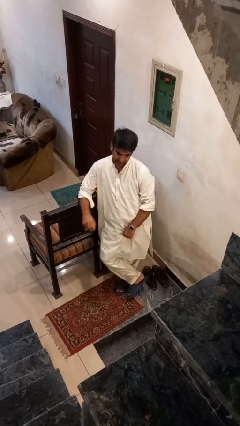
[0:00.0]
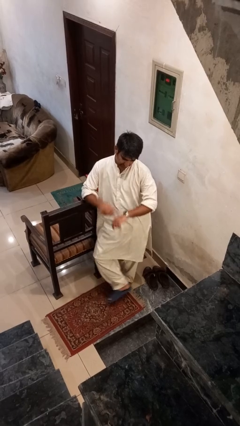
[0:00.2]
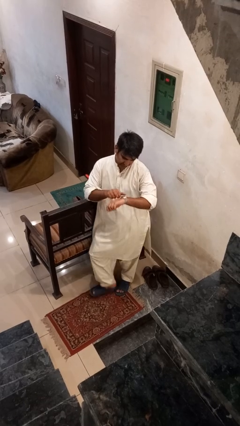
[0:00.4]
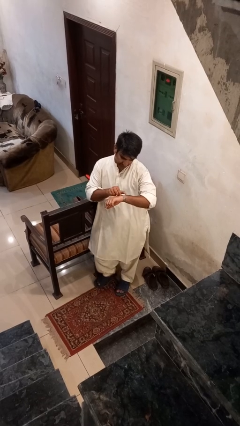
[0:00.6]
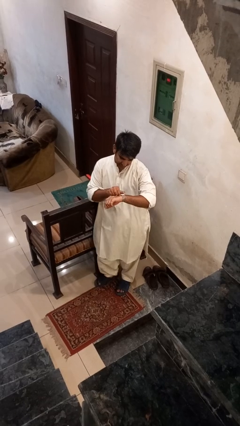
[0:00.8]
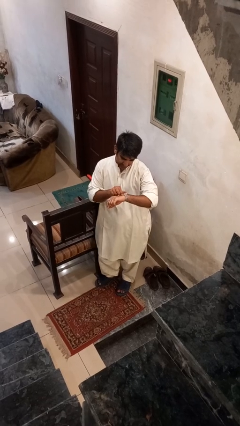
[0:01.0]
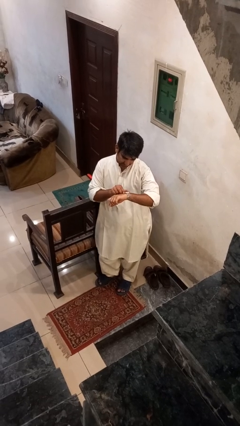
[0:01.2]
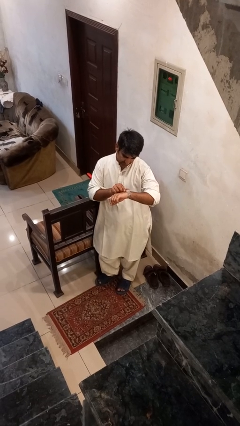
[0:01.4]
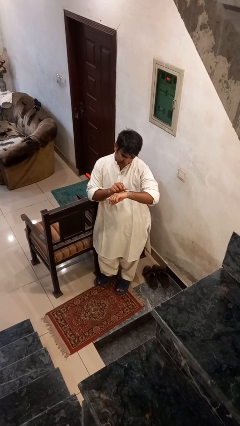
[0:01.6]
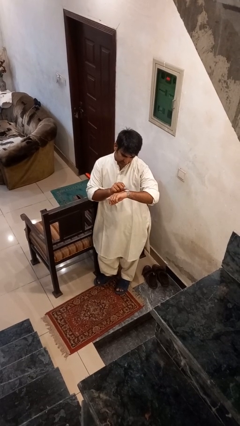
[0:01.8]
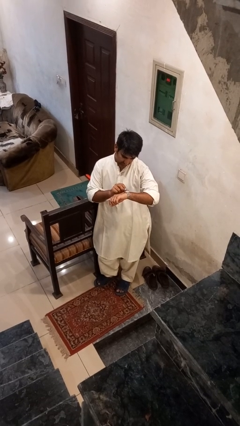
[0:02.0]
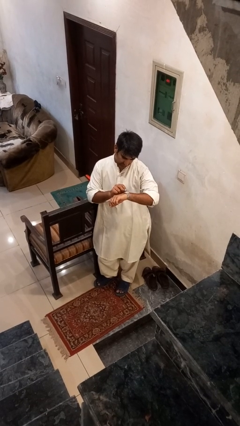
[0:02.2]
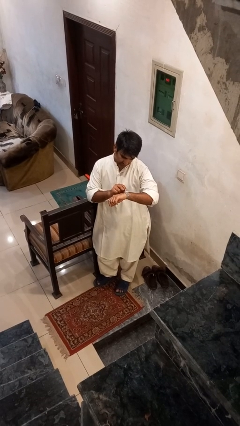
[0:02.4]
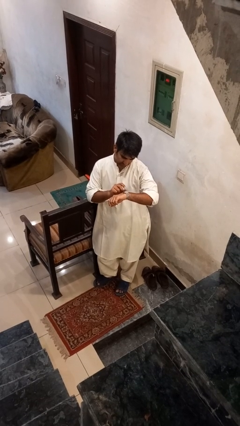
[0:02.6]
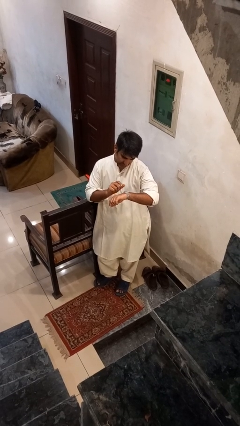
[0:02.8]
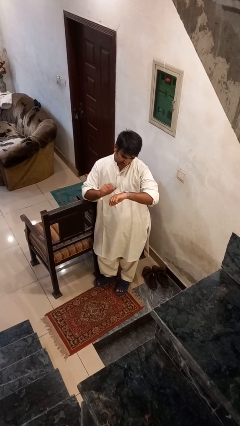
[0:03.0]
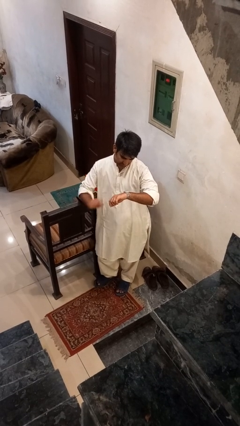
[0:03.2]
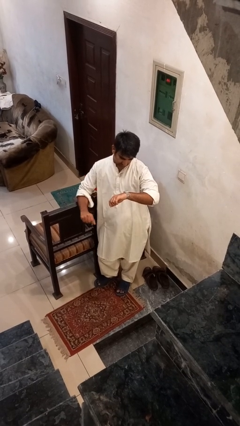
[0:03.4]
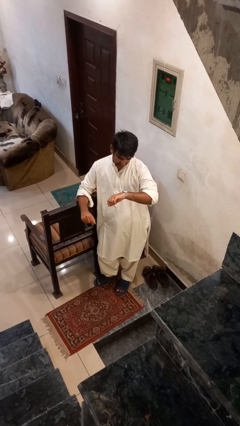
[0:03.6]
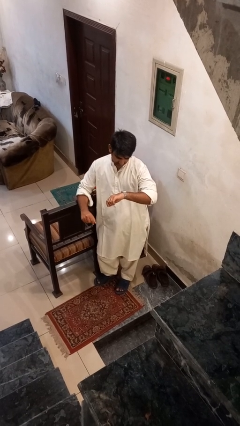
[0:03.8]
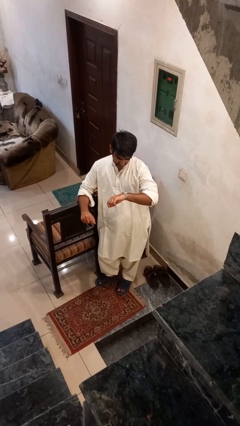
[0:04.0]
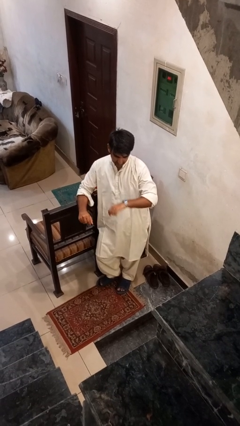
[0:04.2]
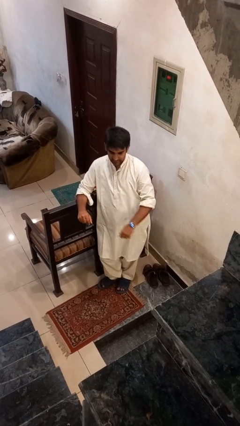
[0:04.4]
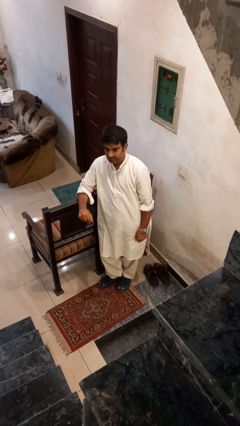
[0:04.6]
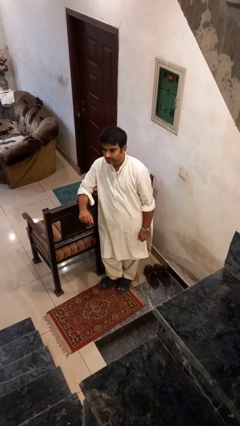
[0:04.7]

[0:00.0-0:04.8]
person looks at wristwatch

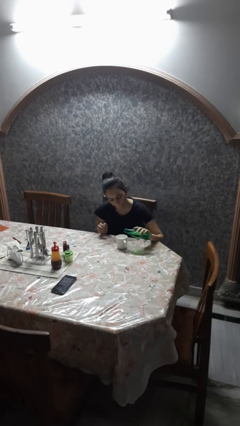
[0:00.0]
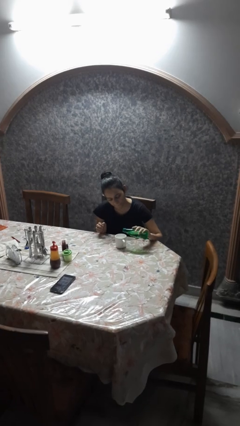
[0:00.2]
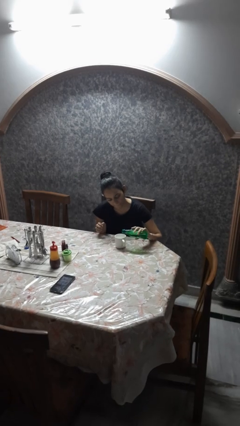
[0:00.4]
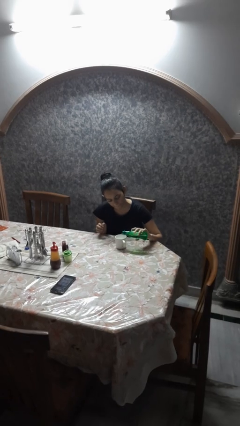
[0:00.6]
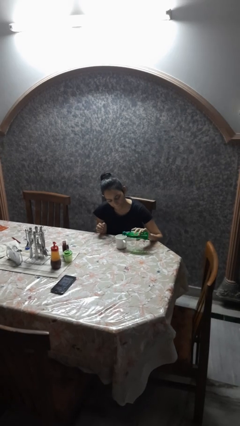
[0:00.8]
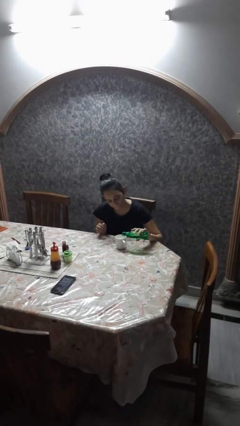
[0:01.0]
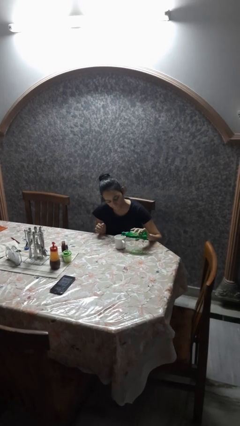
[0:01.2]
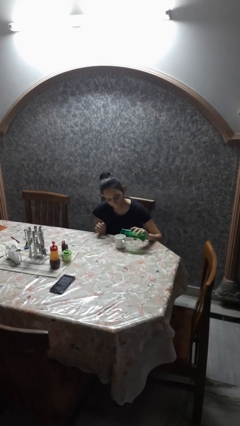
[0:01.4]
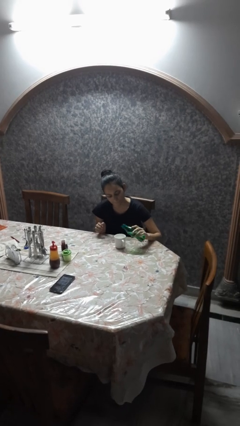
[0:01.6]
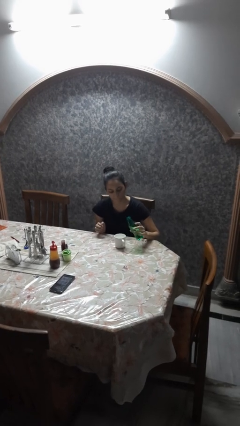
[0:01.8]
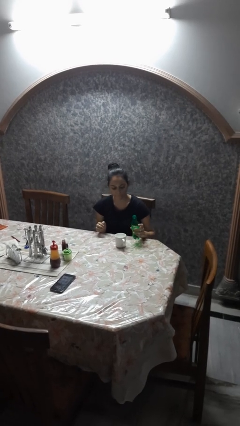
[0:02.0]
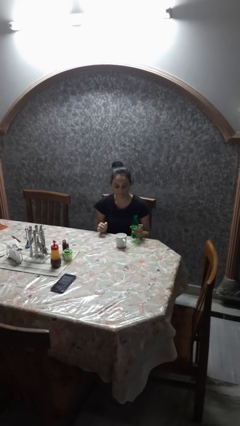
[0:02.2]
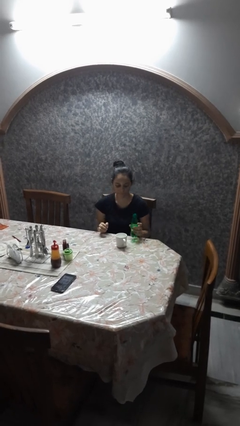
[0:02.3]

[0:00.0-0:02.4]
person pours liquid into cup

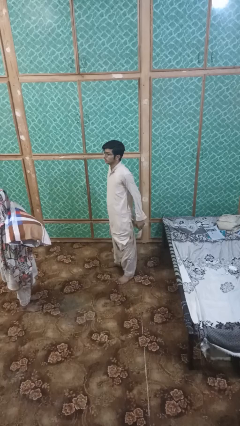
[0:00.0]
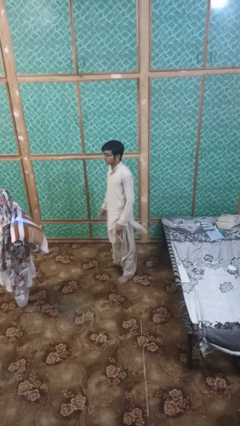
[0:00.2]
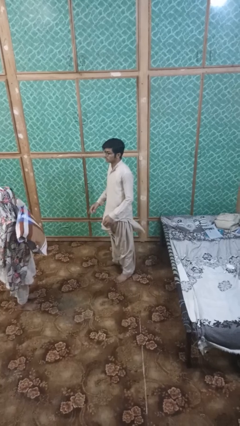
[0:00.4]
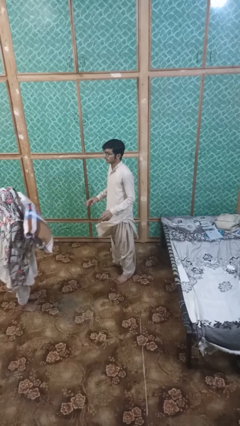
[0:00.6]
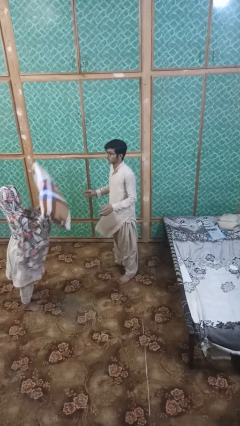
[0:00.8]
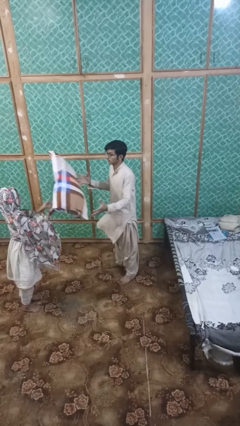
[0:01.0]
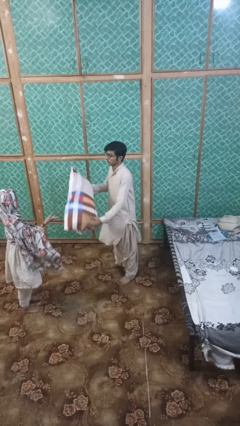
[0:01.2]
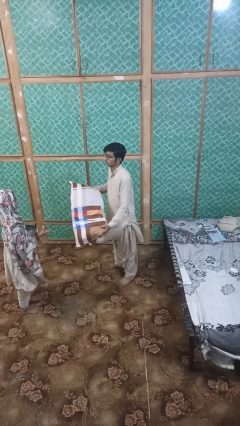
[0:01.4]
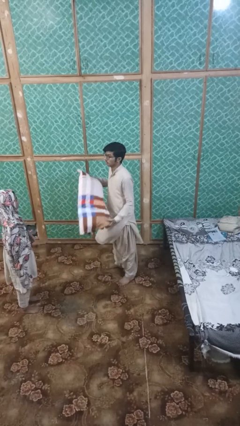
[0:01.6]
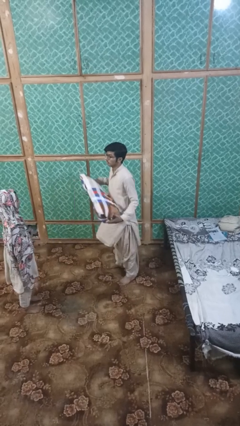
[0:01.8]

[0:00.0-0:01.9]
person catches object from person

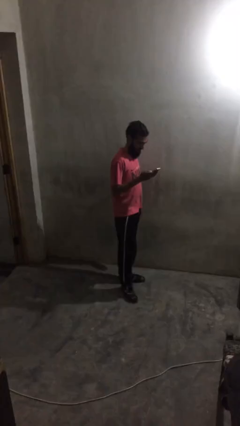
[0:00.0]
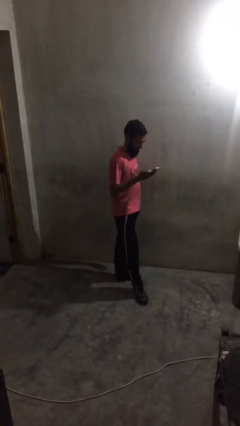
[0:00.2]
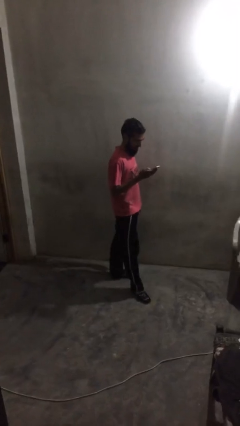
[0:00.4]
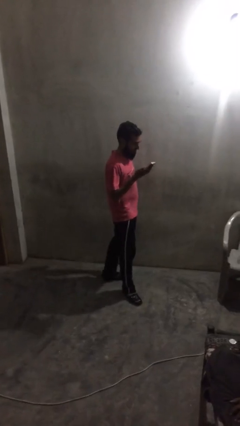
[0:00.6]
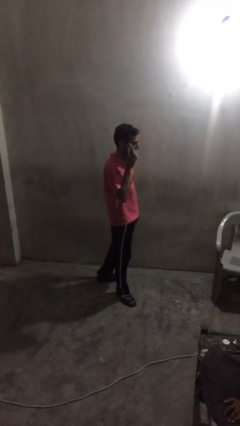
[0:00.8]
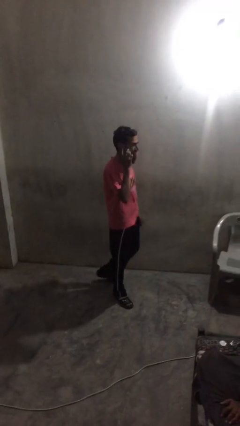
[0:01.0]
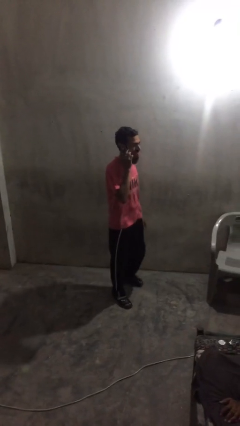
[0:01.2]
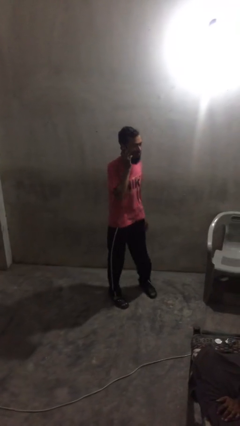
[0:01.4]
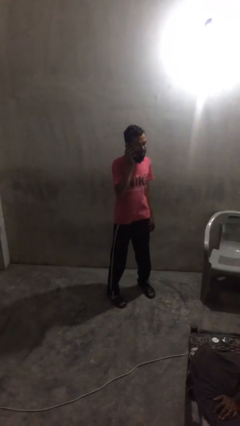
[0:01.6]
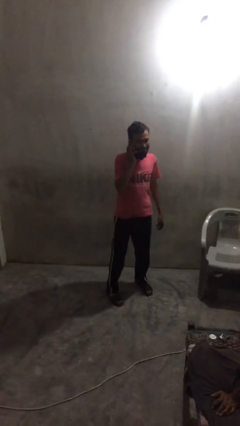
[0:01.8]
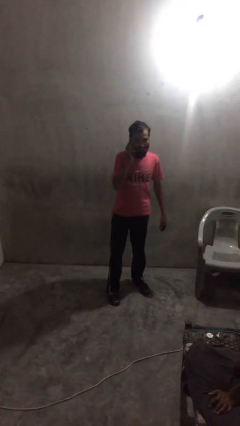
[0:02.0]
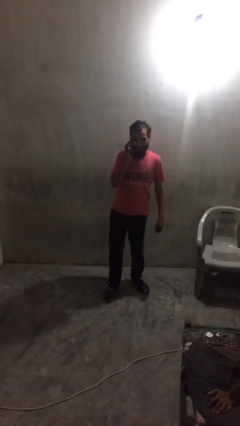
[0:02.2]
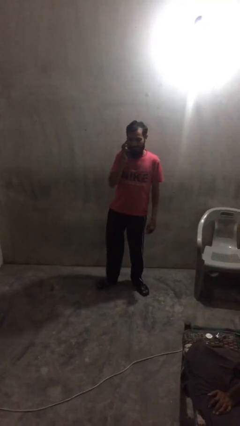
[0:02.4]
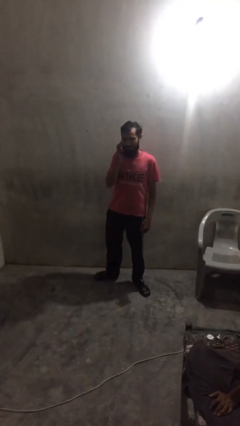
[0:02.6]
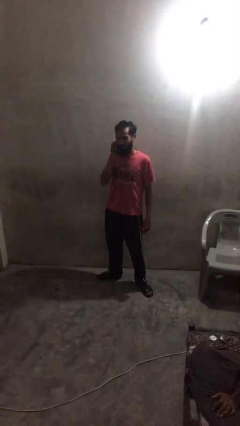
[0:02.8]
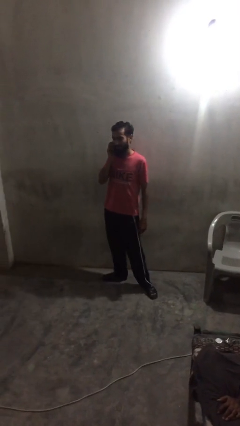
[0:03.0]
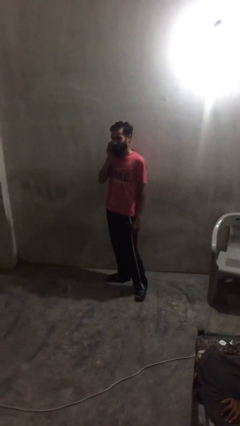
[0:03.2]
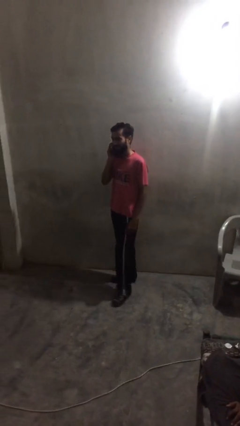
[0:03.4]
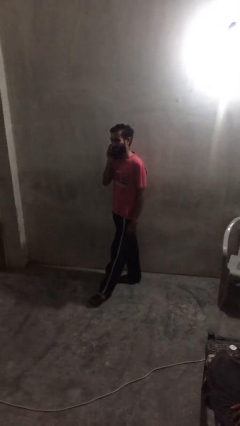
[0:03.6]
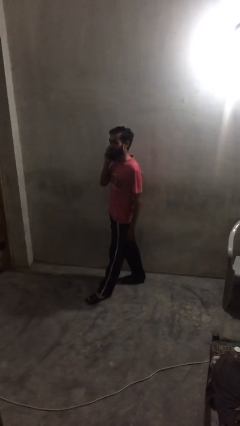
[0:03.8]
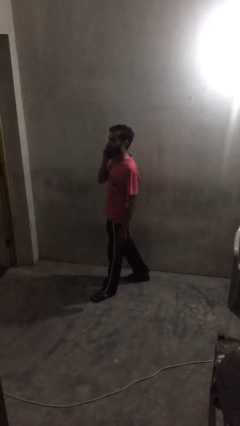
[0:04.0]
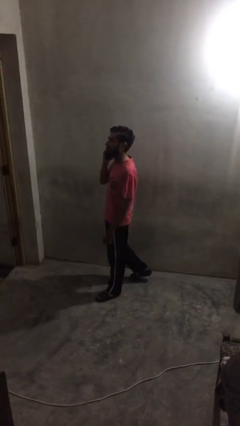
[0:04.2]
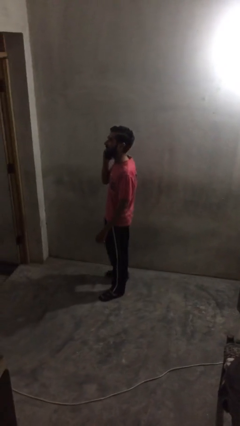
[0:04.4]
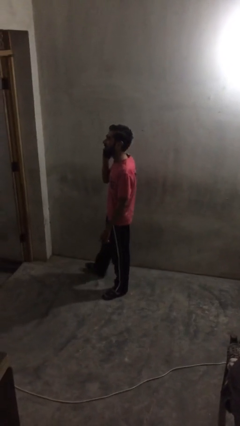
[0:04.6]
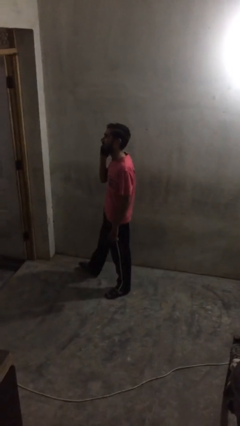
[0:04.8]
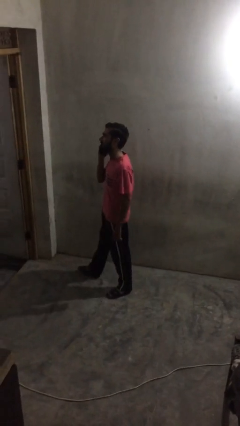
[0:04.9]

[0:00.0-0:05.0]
person talks on phone

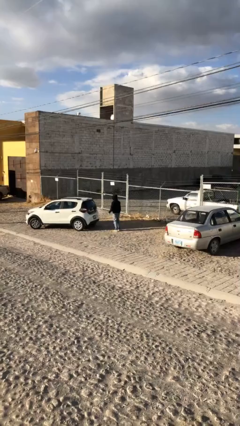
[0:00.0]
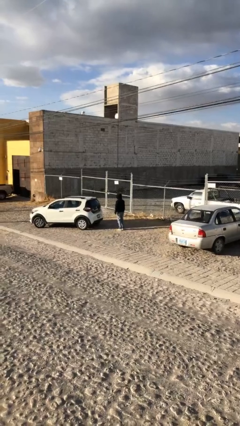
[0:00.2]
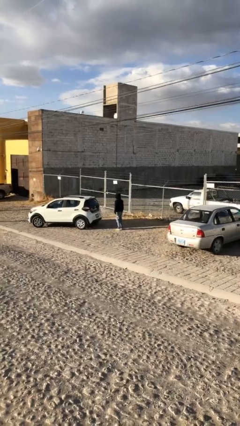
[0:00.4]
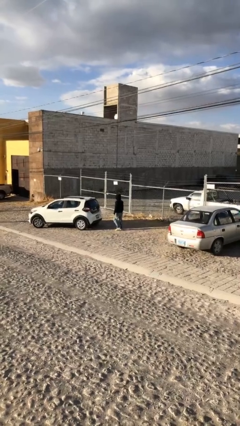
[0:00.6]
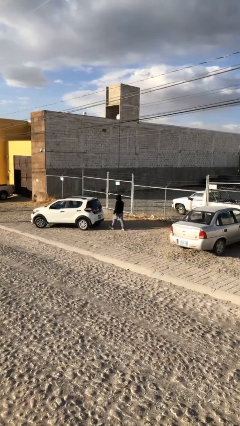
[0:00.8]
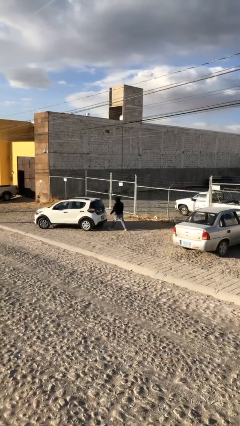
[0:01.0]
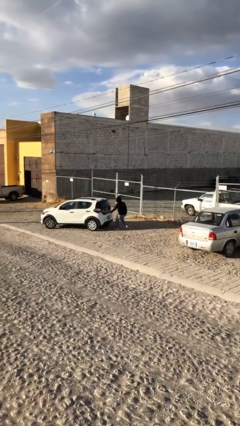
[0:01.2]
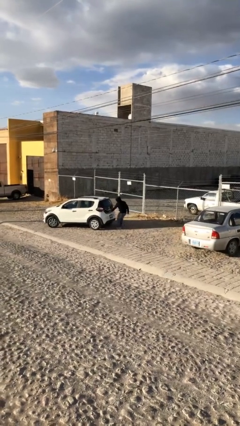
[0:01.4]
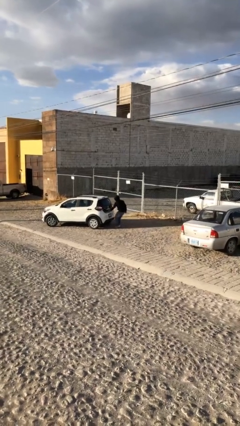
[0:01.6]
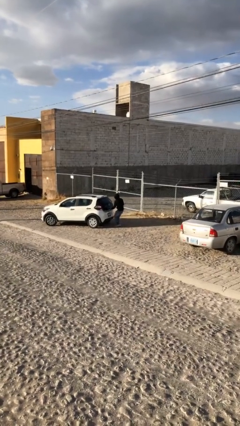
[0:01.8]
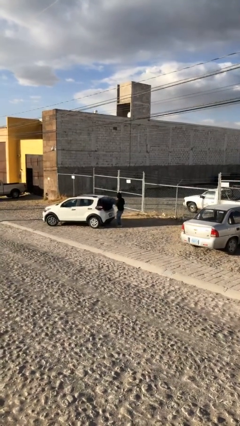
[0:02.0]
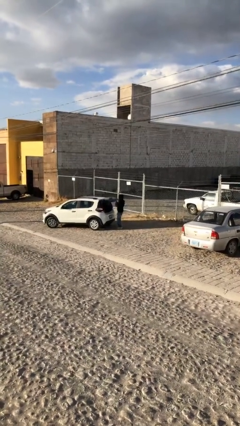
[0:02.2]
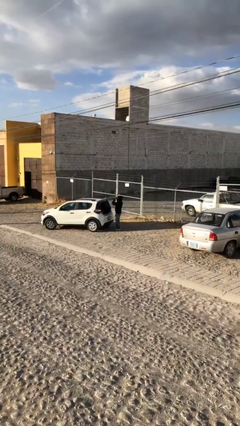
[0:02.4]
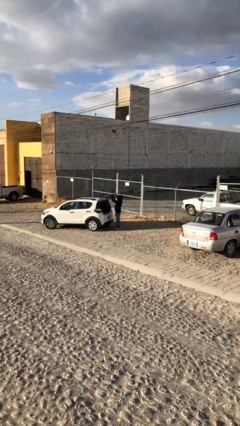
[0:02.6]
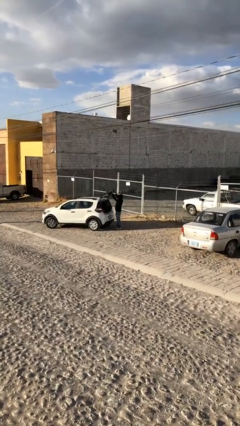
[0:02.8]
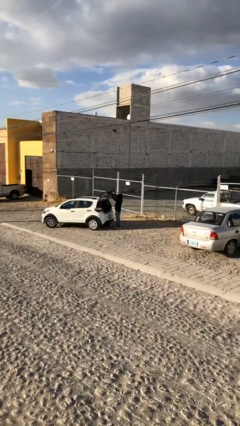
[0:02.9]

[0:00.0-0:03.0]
person opens car trunk

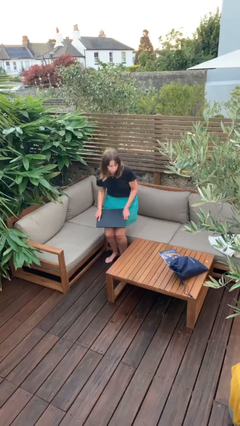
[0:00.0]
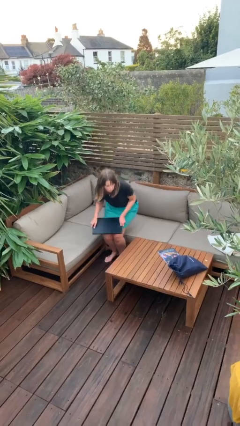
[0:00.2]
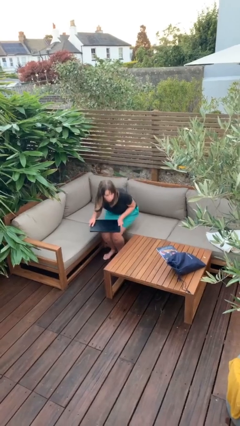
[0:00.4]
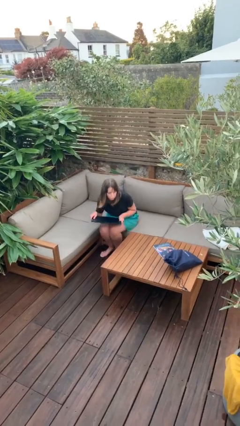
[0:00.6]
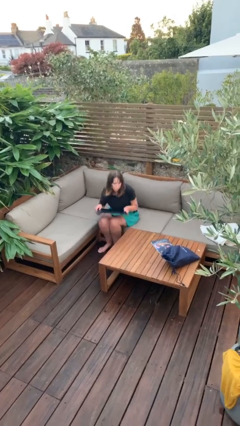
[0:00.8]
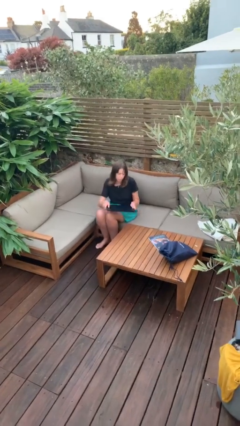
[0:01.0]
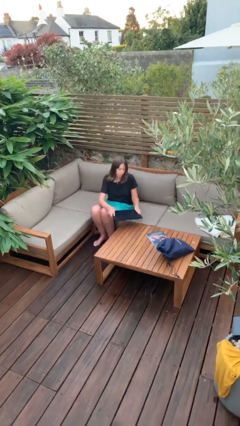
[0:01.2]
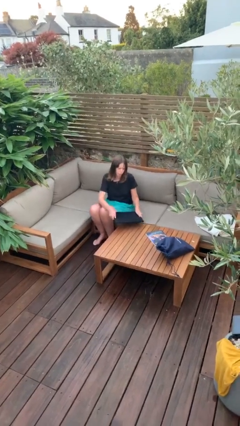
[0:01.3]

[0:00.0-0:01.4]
person sits down
